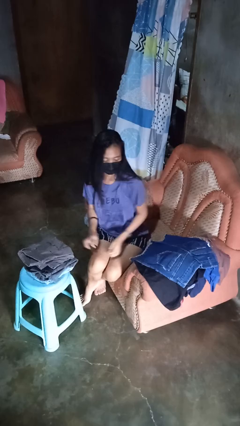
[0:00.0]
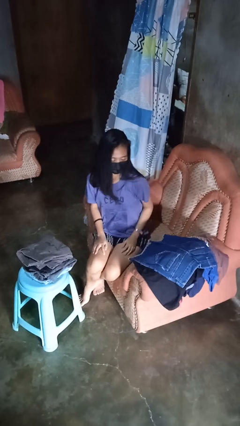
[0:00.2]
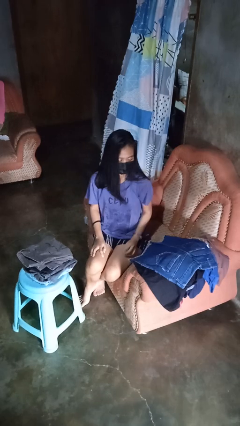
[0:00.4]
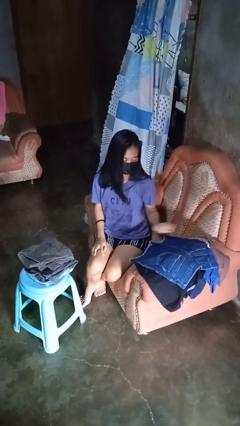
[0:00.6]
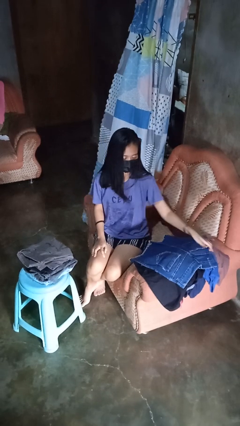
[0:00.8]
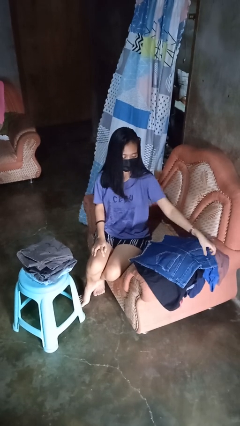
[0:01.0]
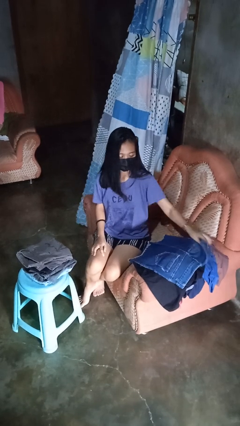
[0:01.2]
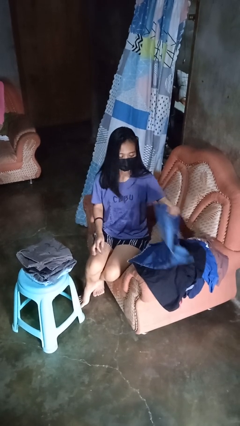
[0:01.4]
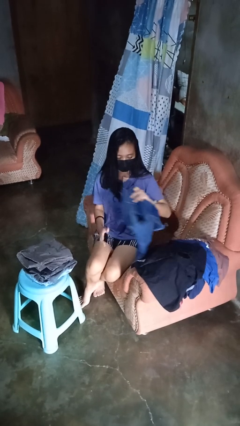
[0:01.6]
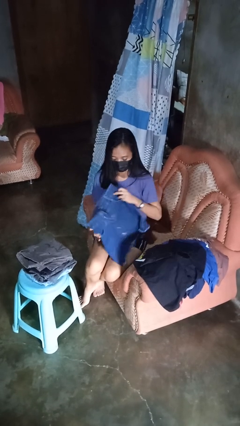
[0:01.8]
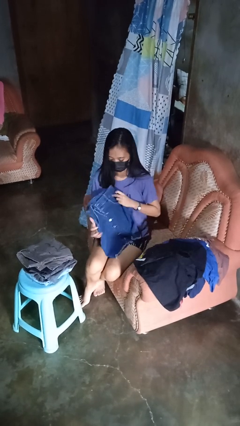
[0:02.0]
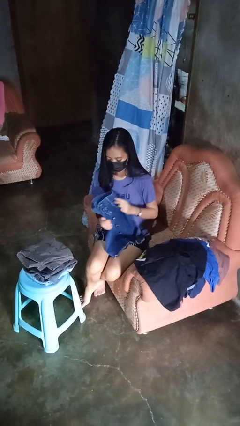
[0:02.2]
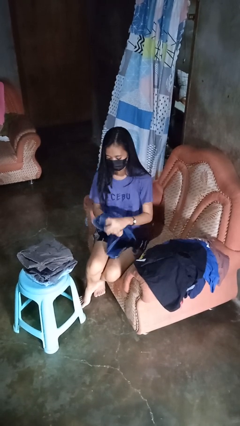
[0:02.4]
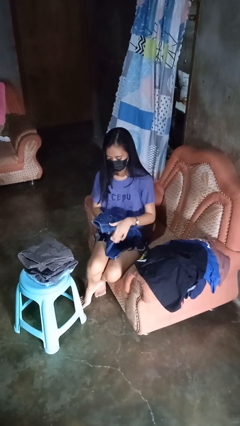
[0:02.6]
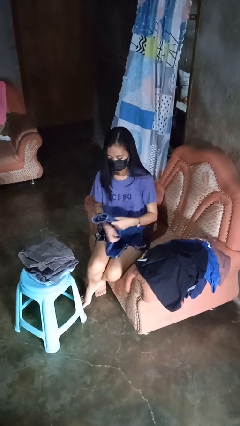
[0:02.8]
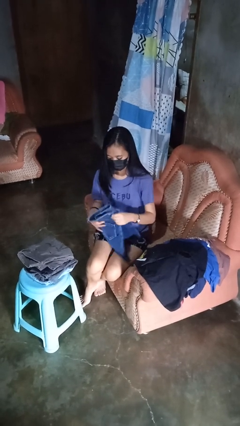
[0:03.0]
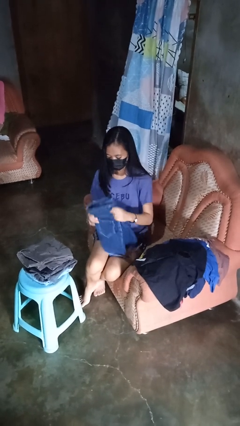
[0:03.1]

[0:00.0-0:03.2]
person folds pants

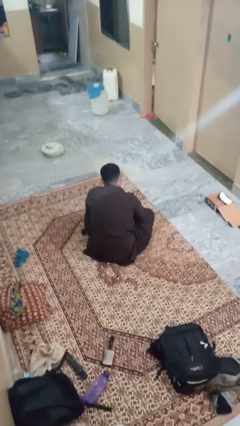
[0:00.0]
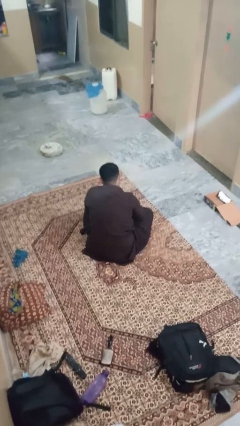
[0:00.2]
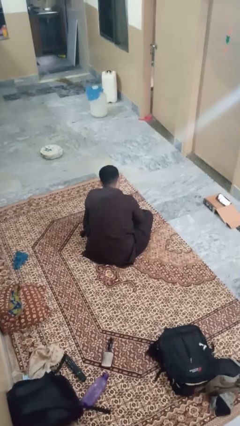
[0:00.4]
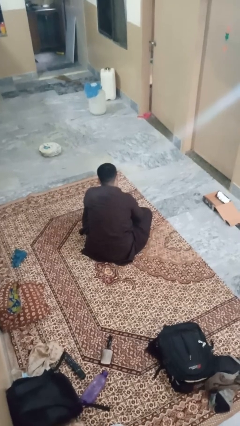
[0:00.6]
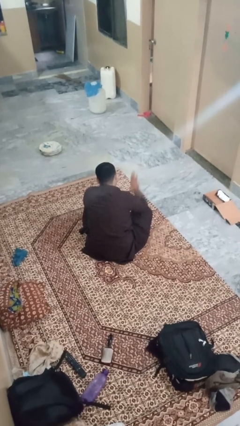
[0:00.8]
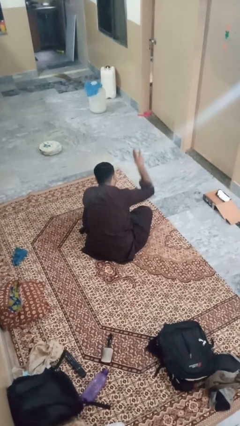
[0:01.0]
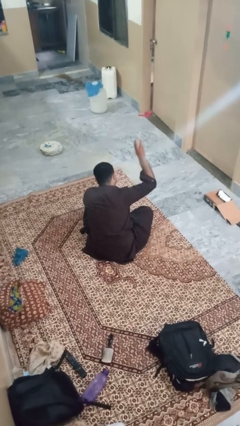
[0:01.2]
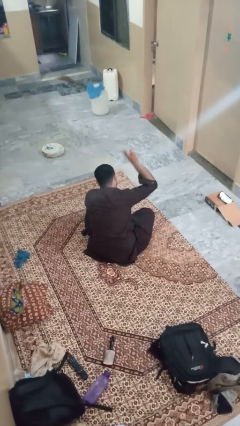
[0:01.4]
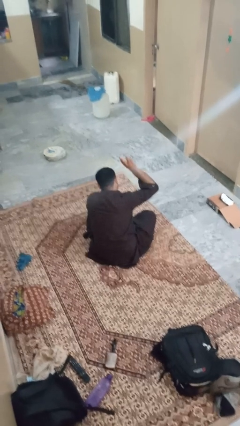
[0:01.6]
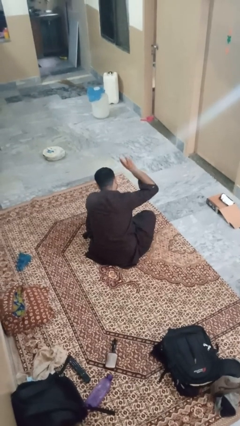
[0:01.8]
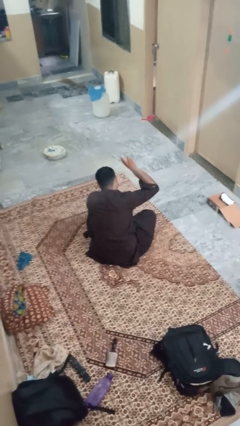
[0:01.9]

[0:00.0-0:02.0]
person gestures number three

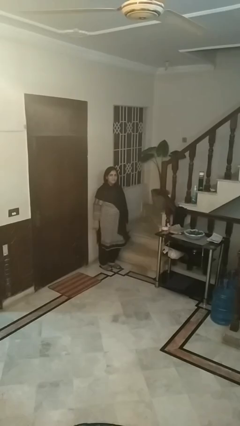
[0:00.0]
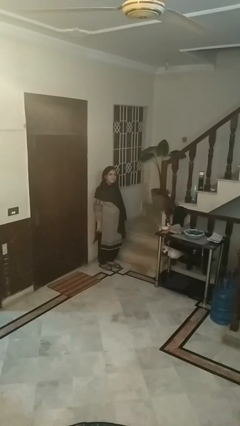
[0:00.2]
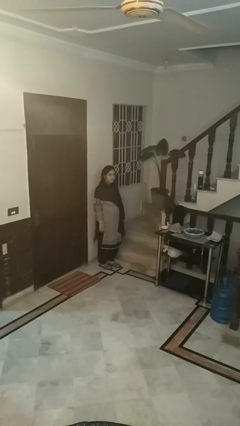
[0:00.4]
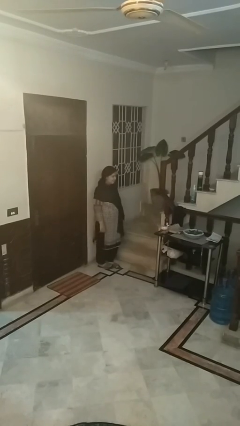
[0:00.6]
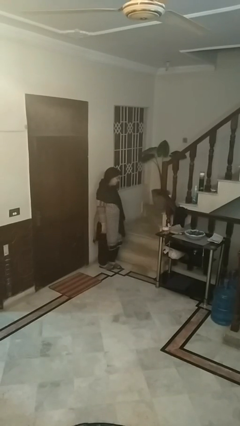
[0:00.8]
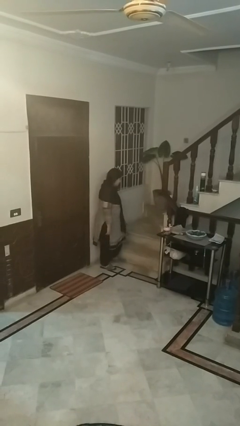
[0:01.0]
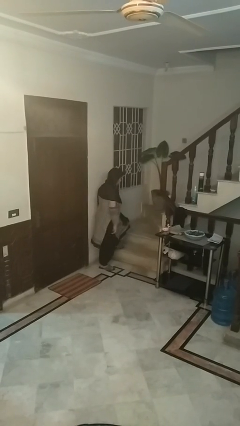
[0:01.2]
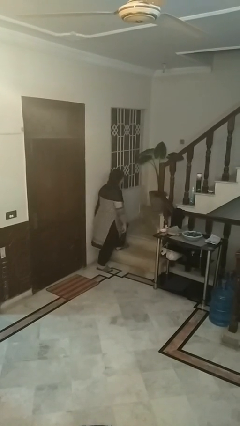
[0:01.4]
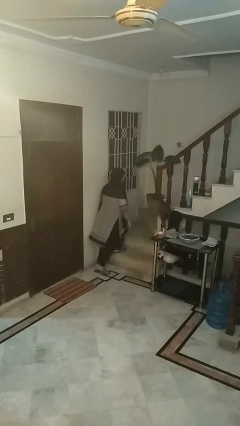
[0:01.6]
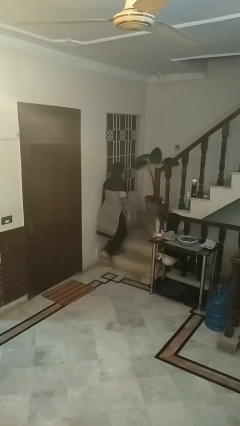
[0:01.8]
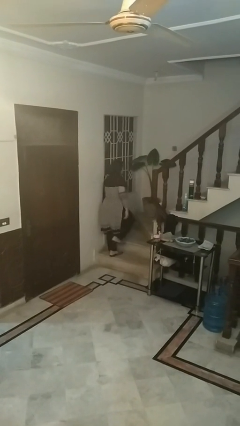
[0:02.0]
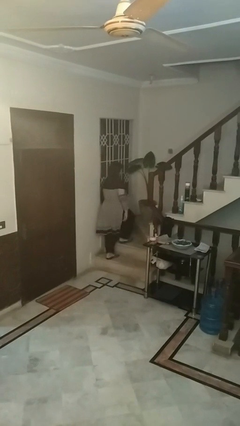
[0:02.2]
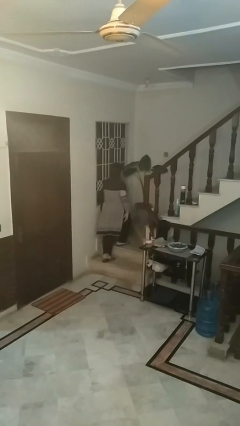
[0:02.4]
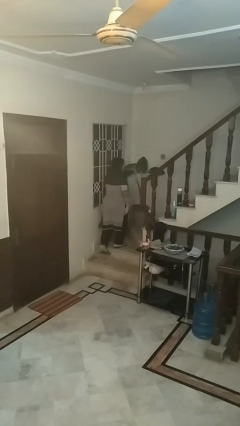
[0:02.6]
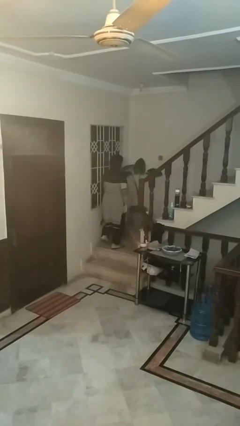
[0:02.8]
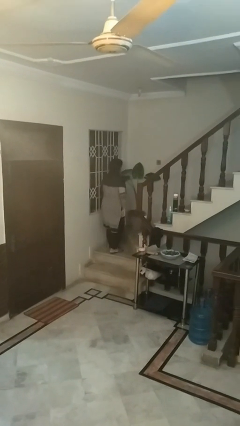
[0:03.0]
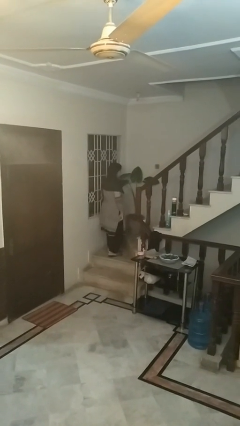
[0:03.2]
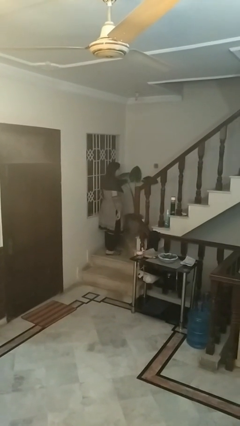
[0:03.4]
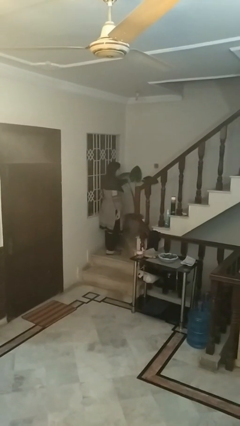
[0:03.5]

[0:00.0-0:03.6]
person climbs up stairs

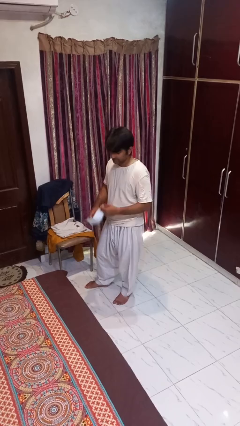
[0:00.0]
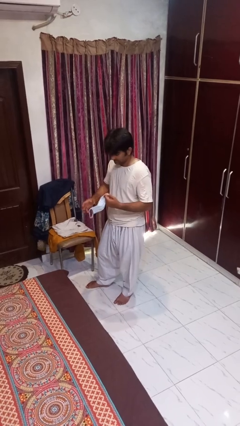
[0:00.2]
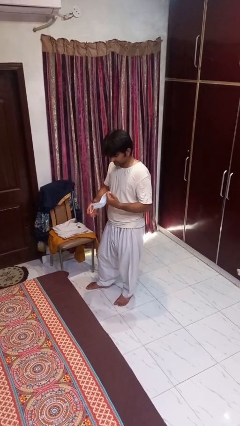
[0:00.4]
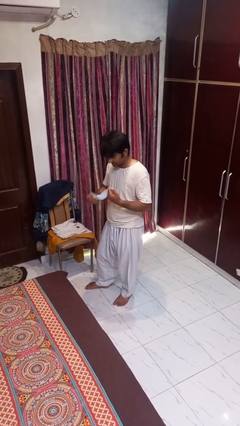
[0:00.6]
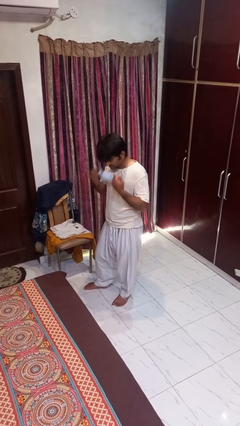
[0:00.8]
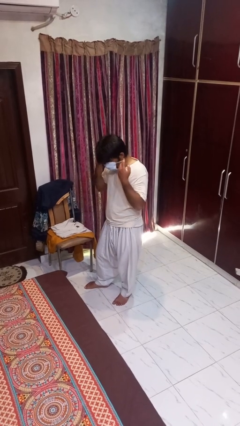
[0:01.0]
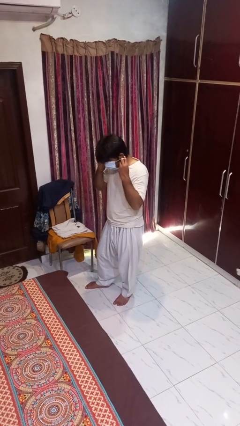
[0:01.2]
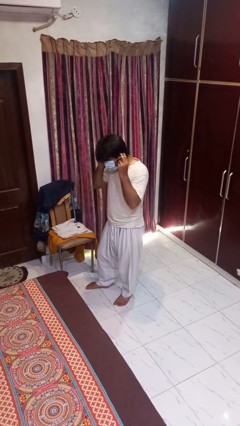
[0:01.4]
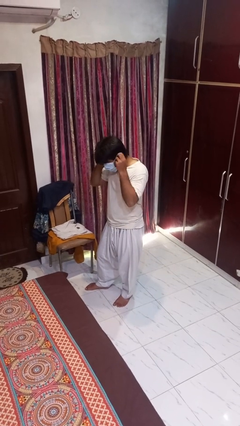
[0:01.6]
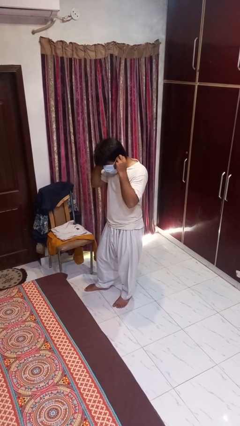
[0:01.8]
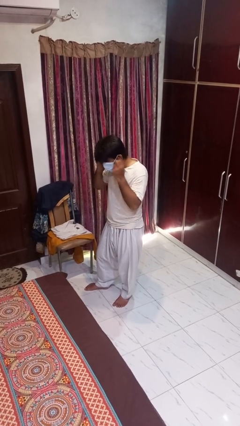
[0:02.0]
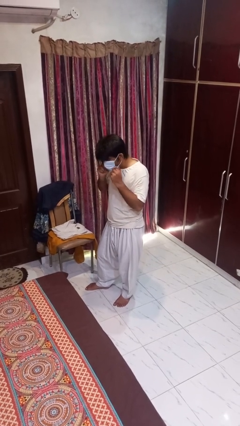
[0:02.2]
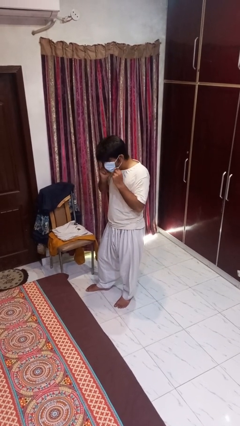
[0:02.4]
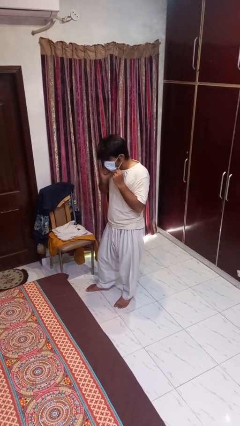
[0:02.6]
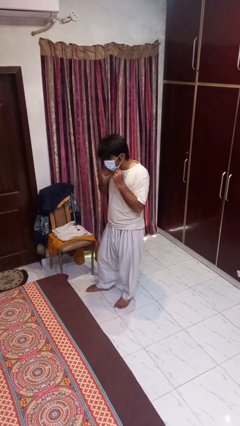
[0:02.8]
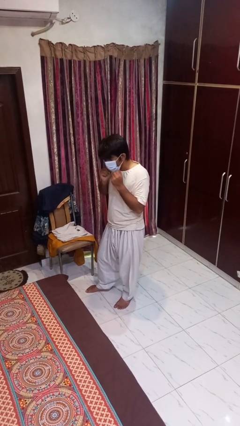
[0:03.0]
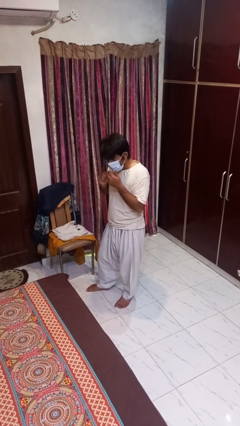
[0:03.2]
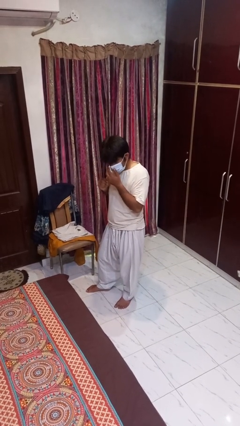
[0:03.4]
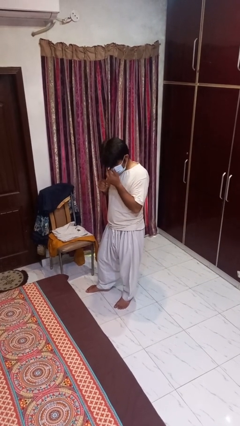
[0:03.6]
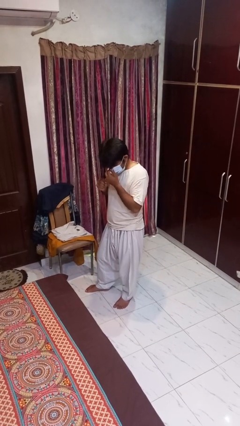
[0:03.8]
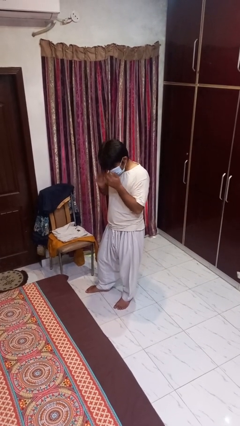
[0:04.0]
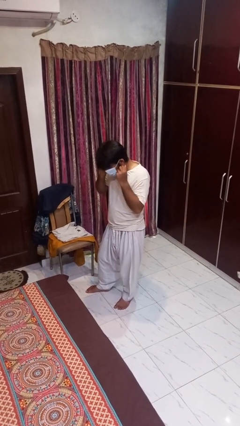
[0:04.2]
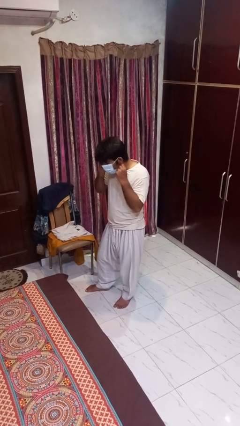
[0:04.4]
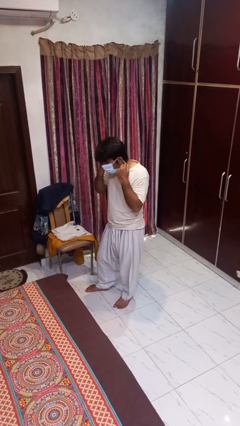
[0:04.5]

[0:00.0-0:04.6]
person puts on facemask

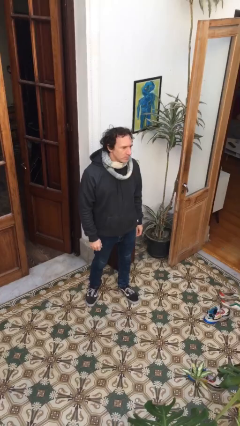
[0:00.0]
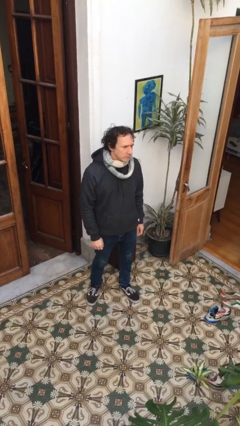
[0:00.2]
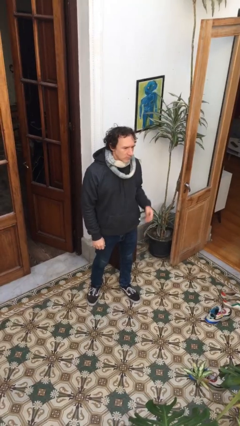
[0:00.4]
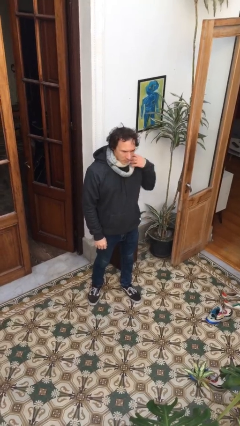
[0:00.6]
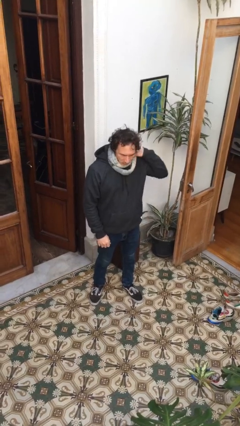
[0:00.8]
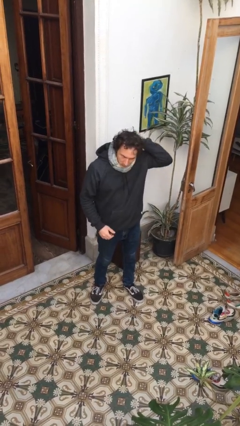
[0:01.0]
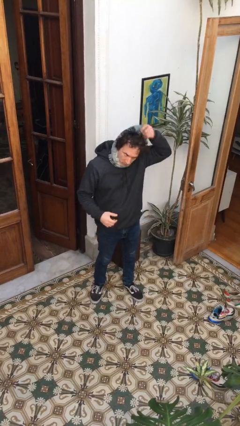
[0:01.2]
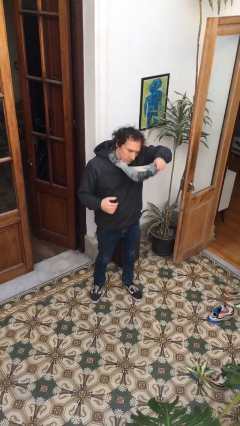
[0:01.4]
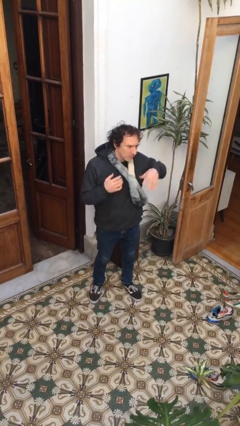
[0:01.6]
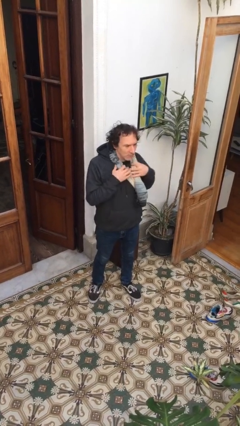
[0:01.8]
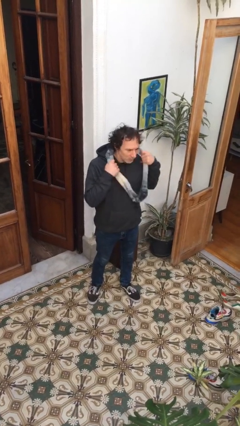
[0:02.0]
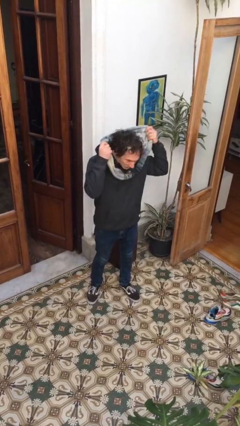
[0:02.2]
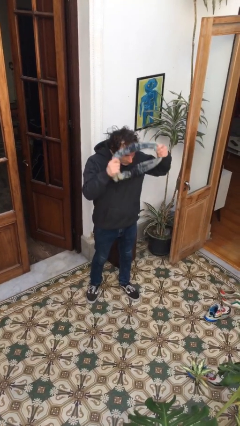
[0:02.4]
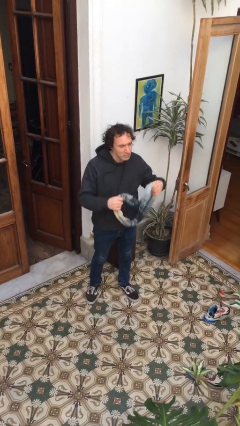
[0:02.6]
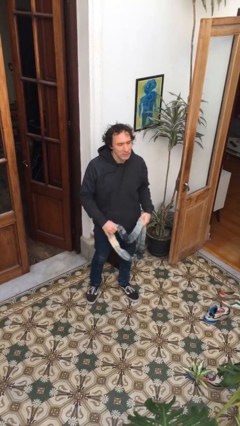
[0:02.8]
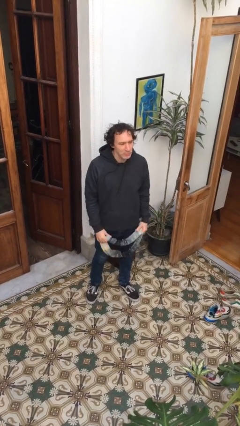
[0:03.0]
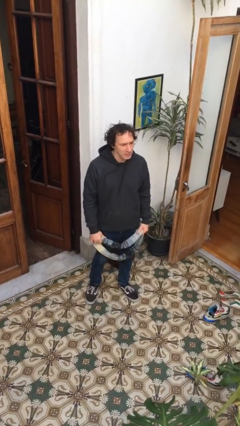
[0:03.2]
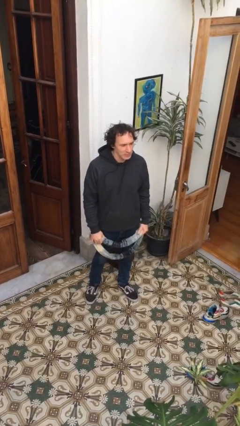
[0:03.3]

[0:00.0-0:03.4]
person takes off scarf

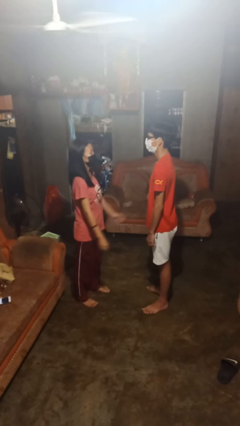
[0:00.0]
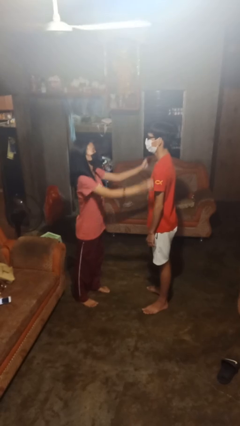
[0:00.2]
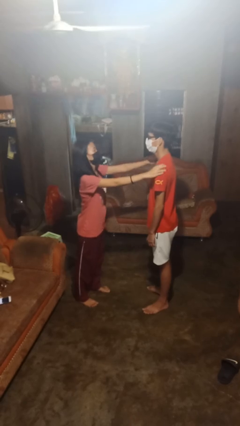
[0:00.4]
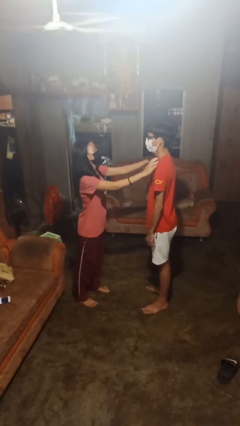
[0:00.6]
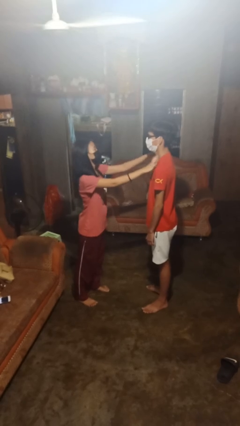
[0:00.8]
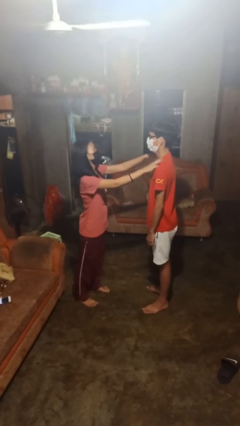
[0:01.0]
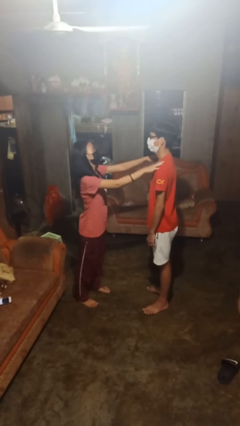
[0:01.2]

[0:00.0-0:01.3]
person pounds shoulders of person
